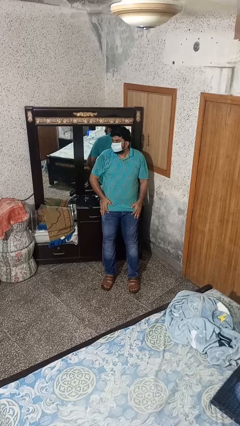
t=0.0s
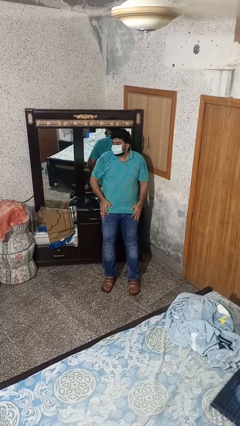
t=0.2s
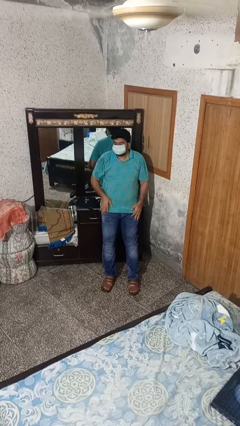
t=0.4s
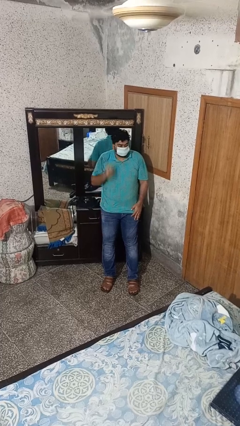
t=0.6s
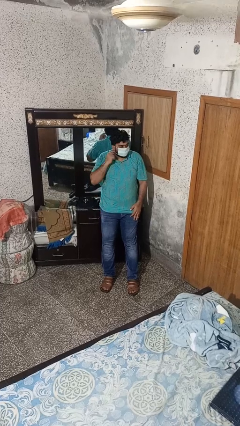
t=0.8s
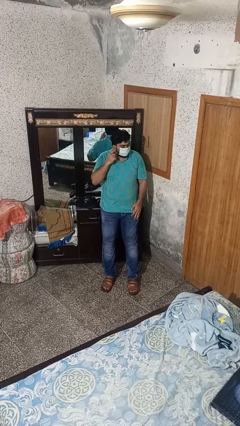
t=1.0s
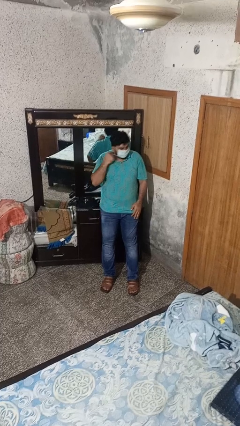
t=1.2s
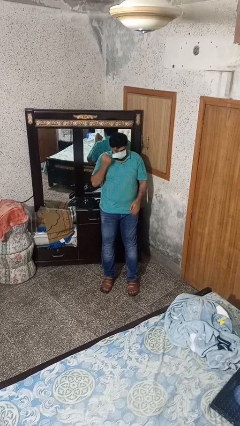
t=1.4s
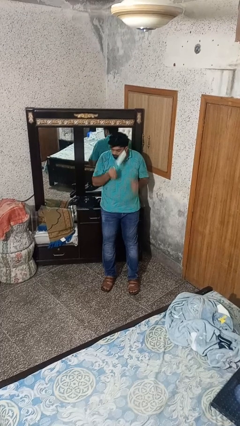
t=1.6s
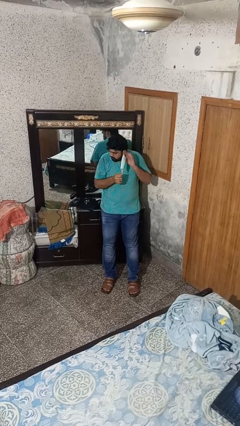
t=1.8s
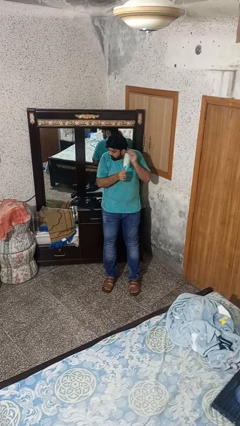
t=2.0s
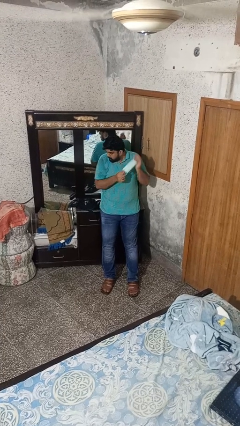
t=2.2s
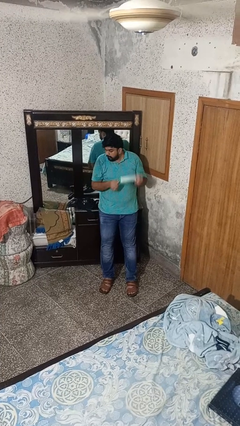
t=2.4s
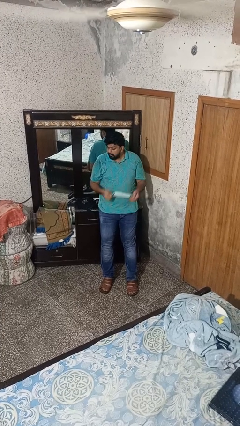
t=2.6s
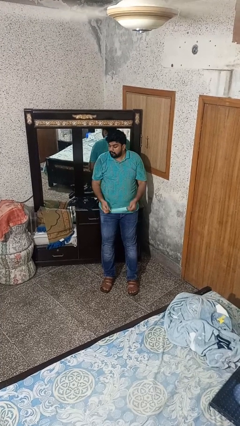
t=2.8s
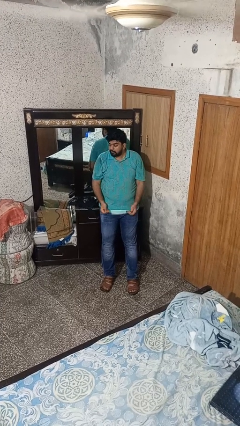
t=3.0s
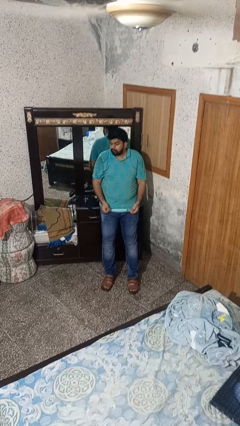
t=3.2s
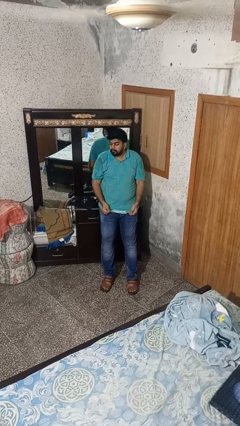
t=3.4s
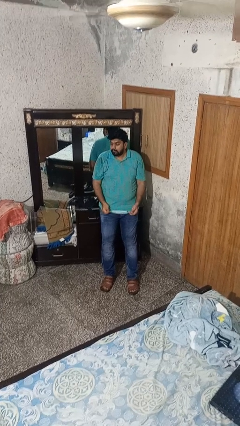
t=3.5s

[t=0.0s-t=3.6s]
person takes off facemask

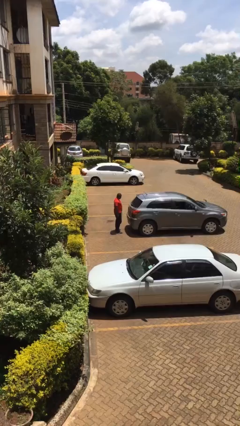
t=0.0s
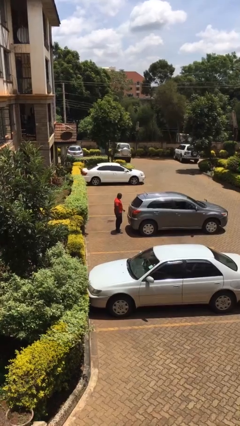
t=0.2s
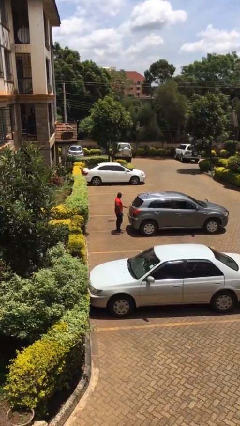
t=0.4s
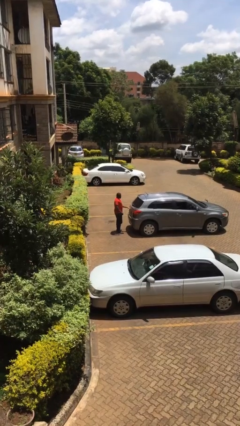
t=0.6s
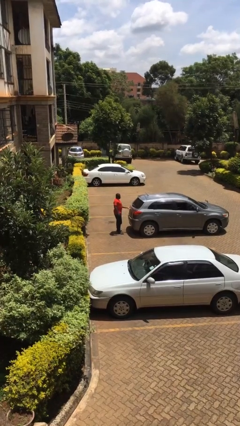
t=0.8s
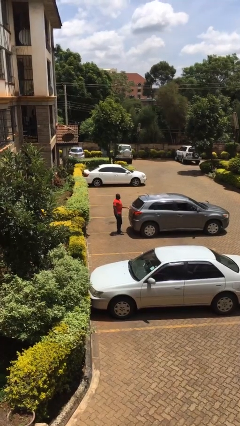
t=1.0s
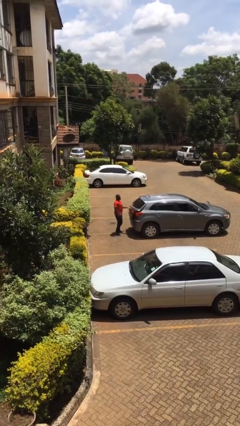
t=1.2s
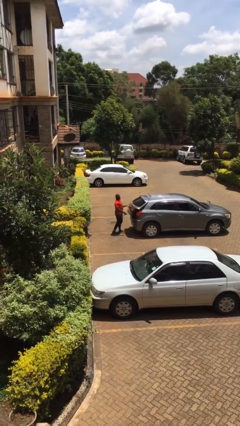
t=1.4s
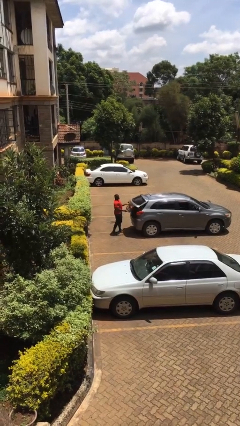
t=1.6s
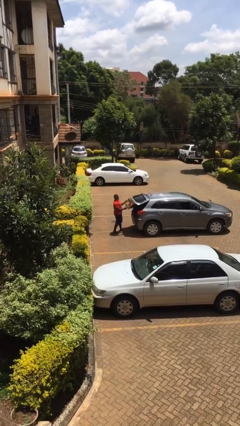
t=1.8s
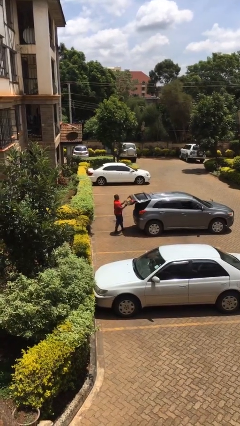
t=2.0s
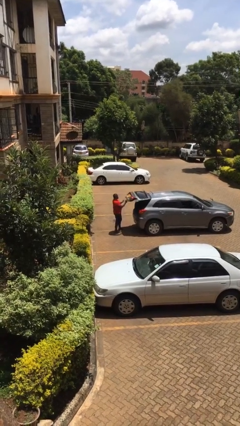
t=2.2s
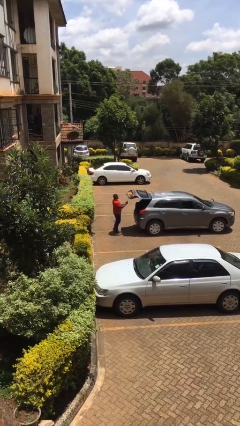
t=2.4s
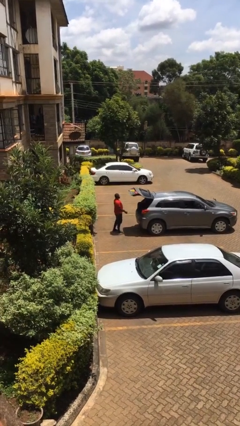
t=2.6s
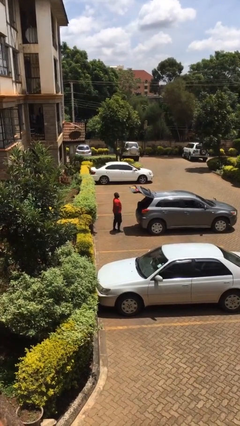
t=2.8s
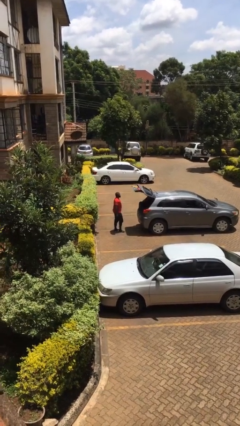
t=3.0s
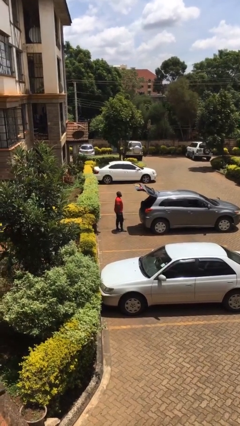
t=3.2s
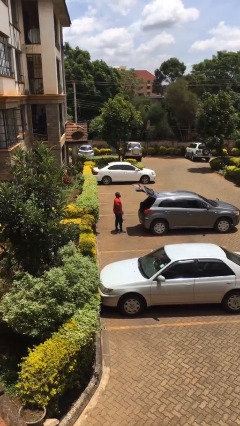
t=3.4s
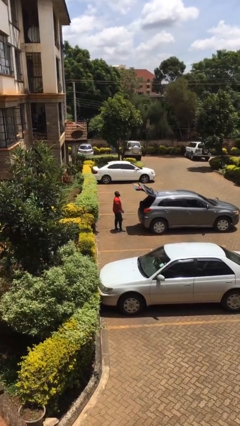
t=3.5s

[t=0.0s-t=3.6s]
person opens car trunk

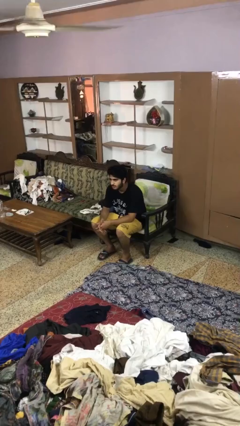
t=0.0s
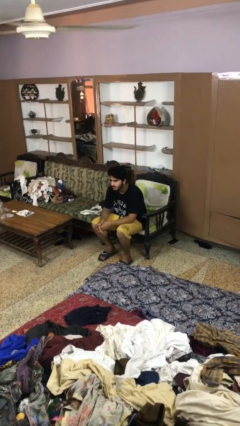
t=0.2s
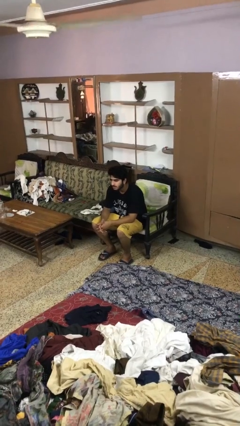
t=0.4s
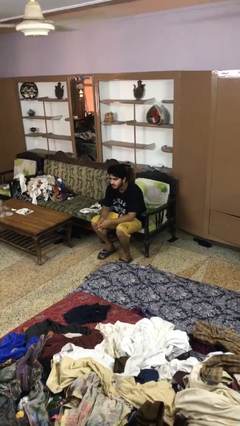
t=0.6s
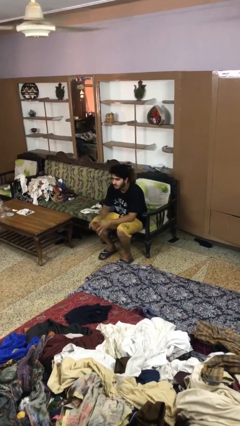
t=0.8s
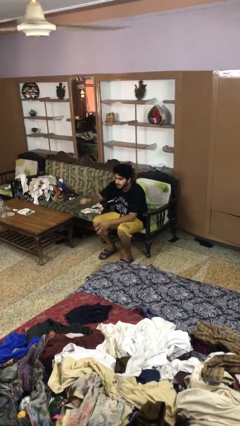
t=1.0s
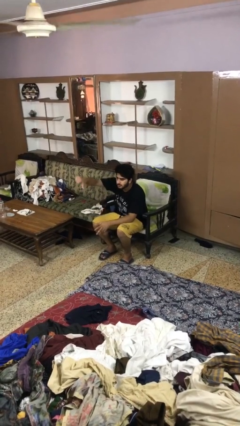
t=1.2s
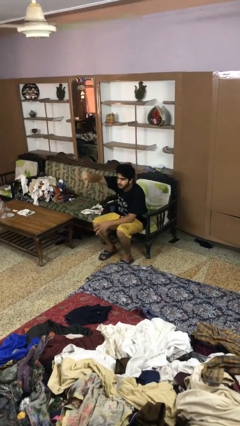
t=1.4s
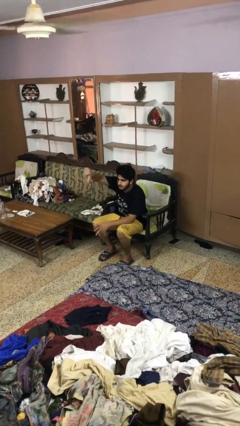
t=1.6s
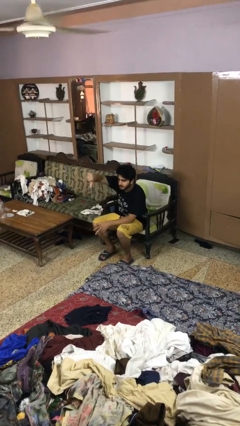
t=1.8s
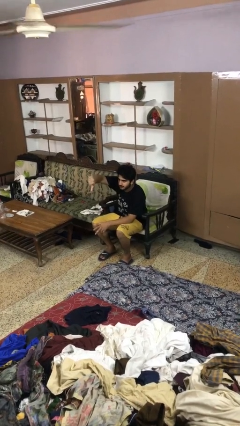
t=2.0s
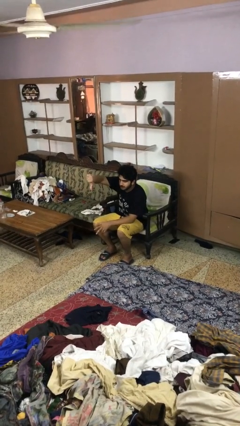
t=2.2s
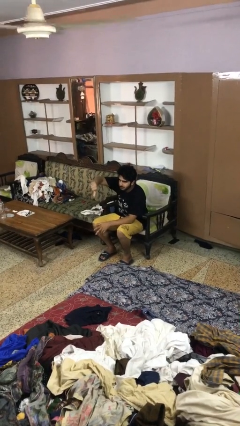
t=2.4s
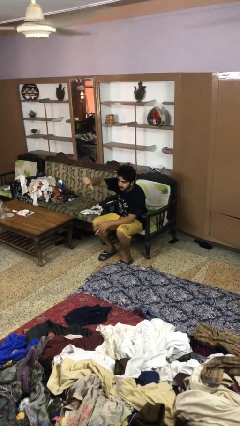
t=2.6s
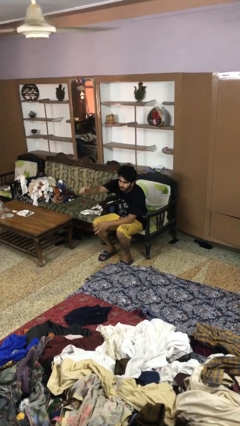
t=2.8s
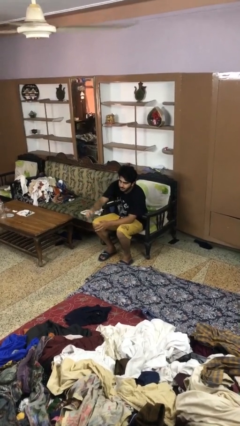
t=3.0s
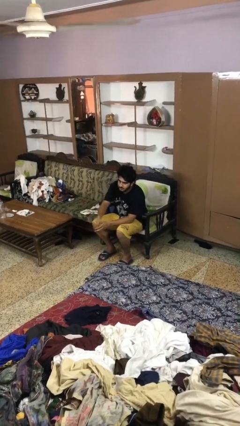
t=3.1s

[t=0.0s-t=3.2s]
person gestures thumbs down

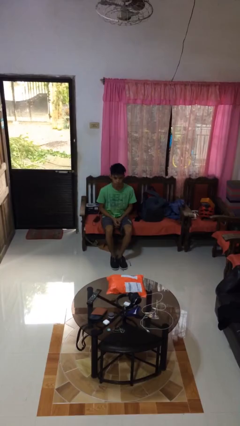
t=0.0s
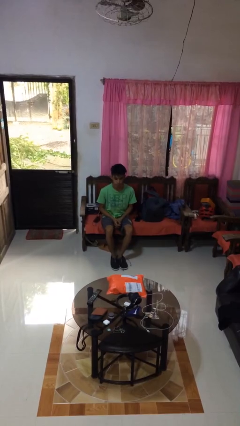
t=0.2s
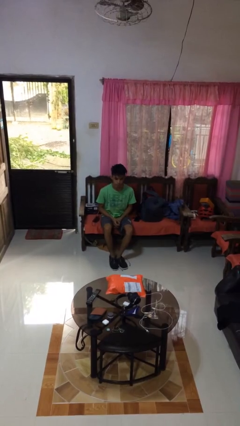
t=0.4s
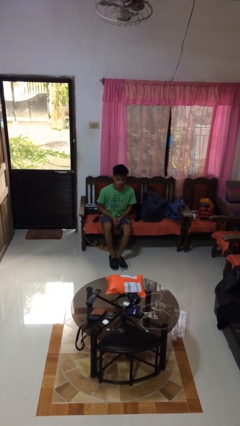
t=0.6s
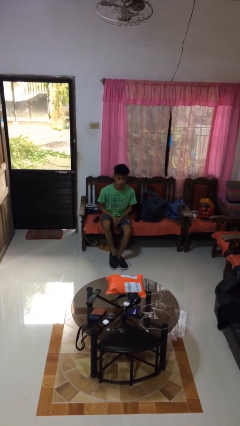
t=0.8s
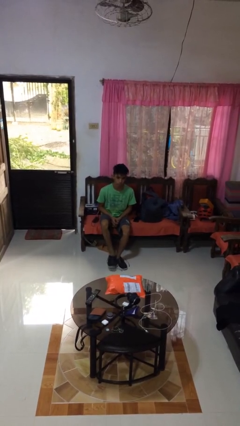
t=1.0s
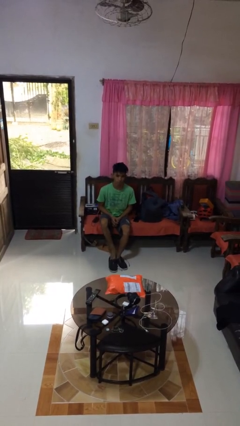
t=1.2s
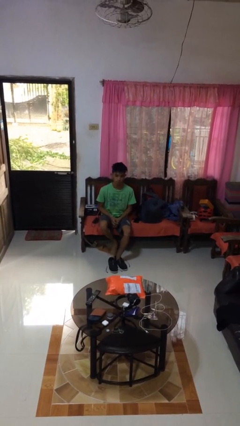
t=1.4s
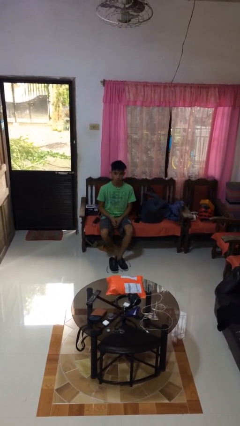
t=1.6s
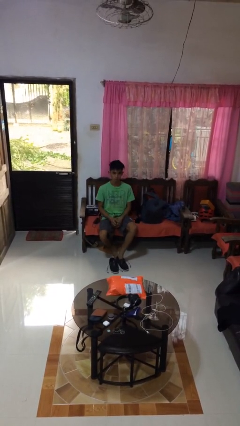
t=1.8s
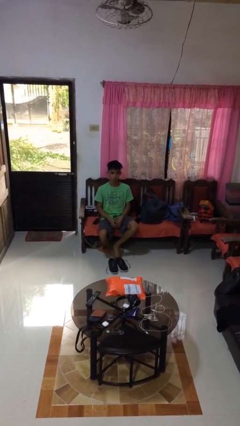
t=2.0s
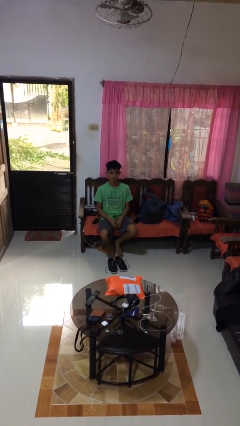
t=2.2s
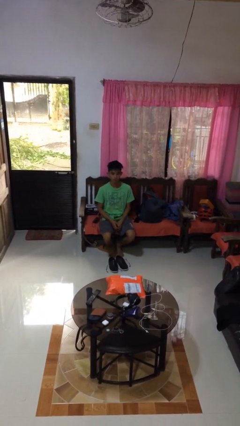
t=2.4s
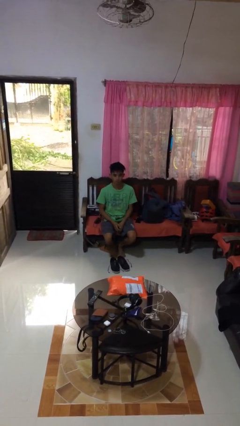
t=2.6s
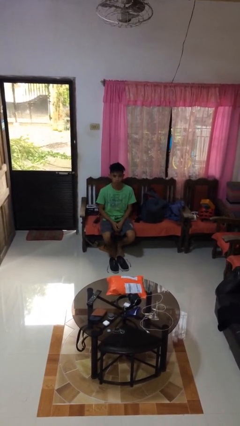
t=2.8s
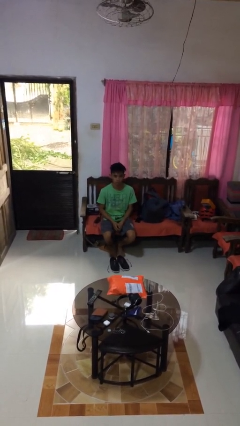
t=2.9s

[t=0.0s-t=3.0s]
person takes off shoes

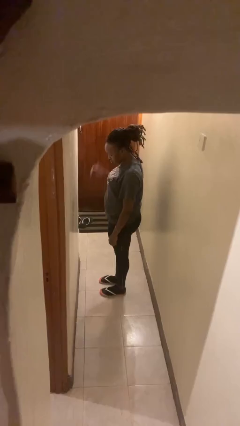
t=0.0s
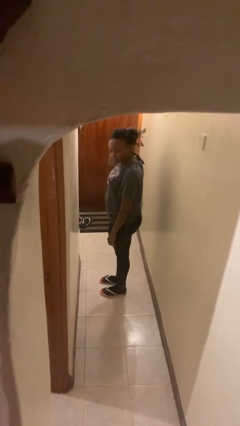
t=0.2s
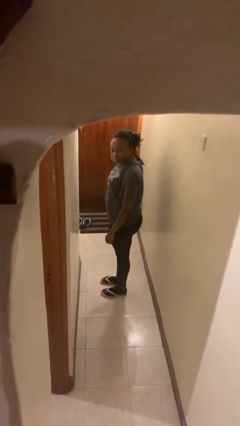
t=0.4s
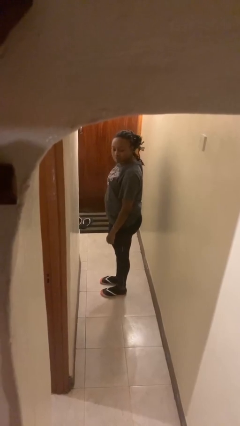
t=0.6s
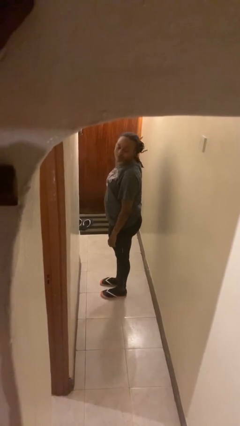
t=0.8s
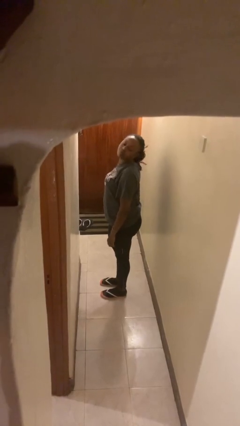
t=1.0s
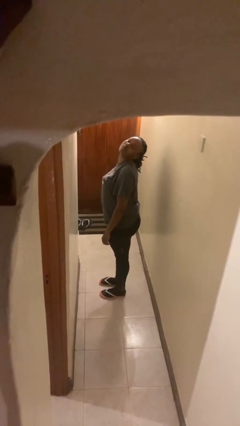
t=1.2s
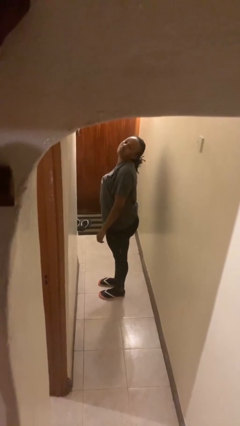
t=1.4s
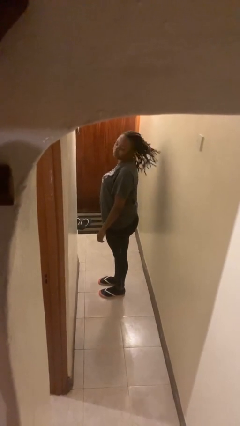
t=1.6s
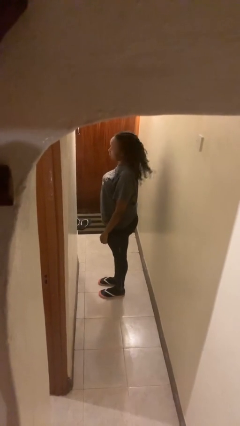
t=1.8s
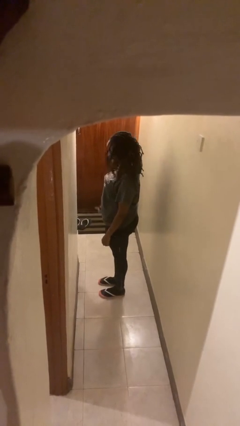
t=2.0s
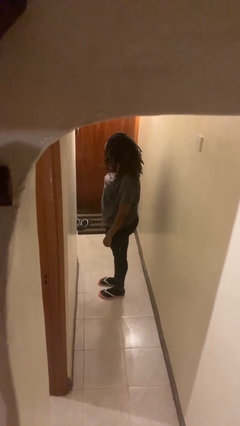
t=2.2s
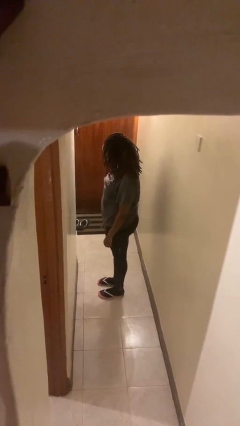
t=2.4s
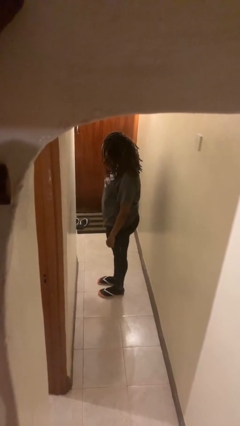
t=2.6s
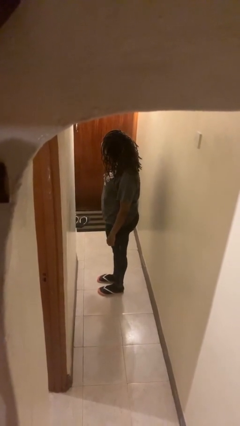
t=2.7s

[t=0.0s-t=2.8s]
person takes off hairtie

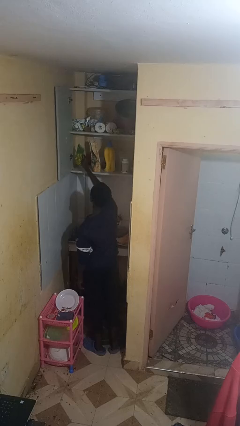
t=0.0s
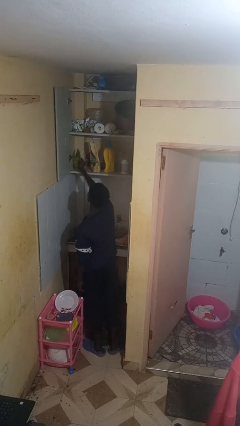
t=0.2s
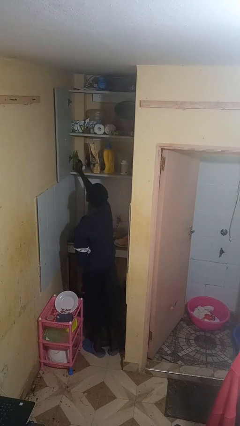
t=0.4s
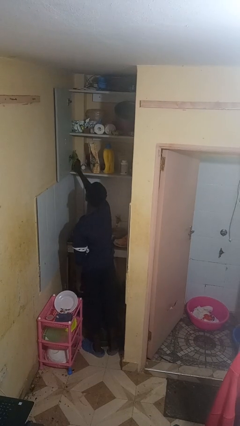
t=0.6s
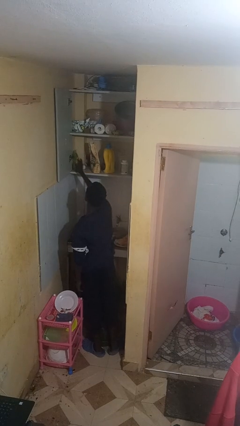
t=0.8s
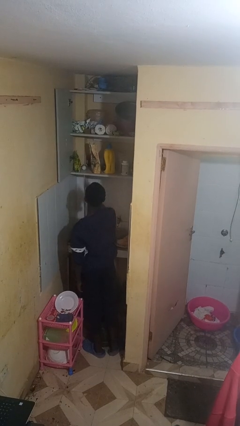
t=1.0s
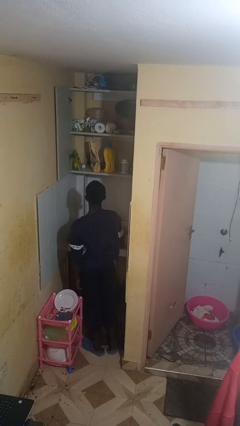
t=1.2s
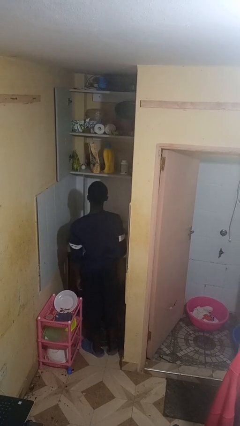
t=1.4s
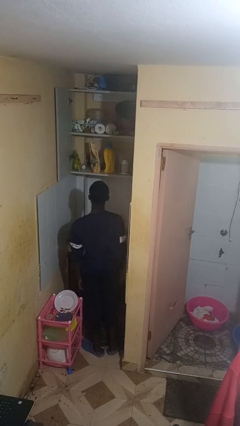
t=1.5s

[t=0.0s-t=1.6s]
person puts object in cabinet
